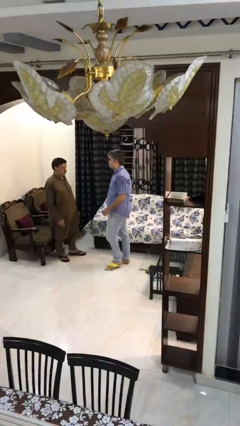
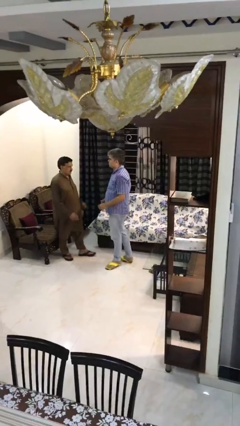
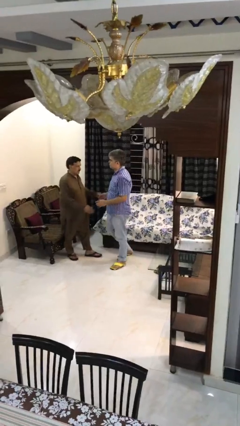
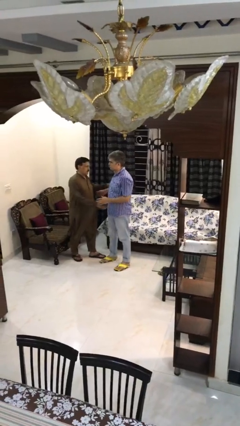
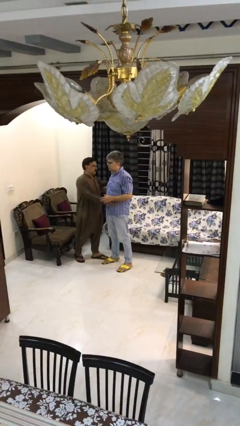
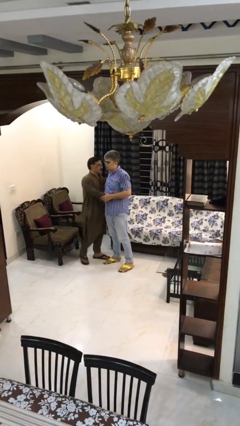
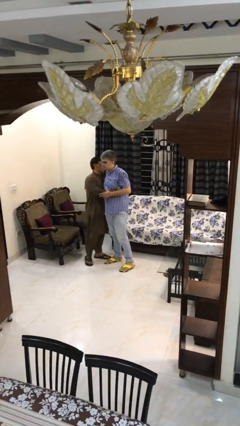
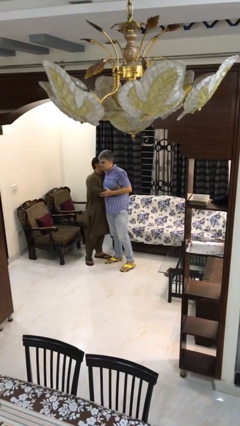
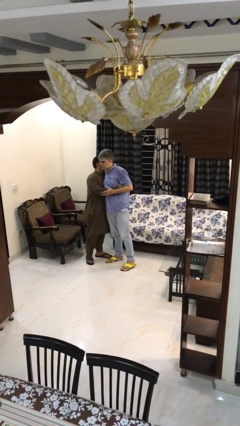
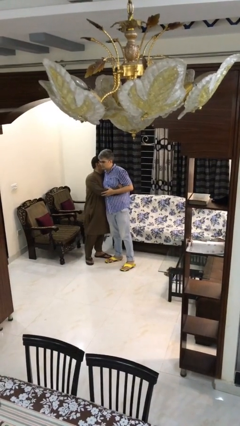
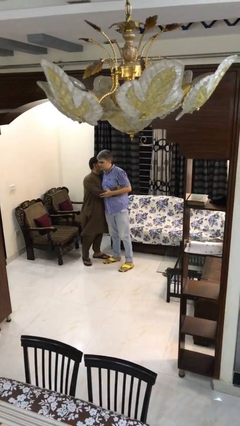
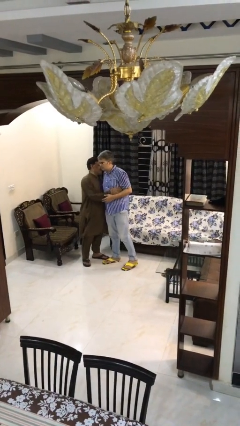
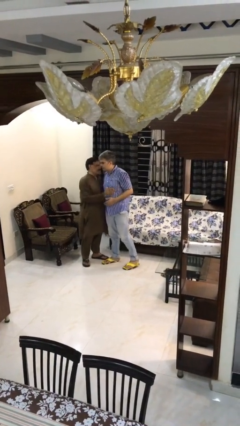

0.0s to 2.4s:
person embraces person

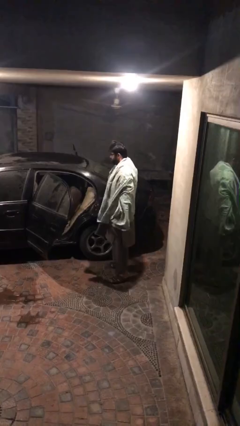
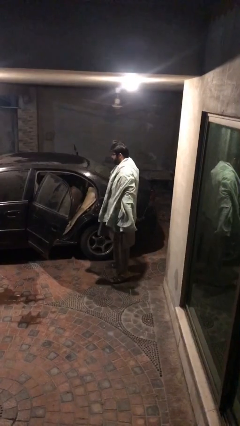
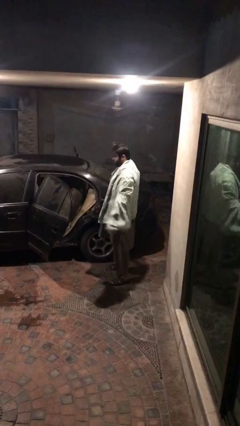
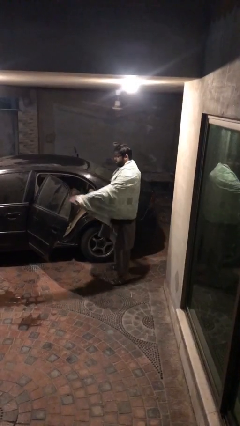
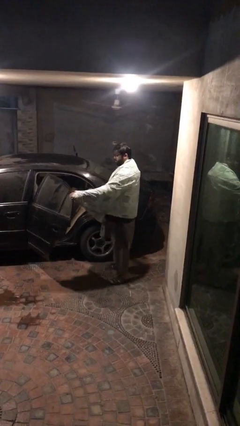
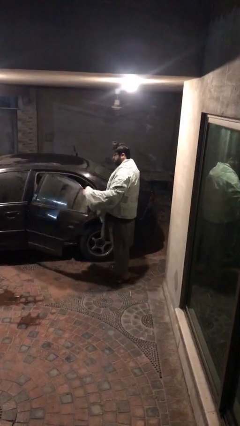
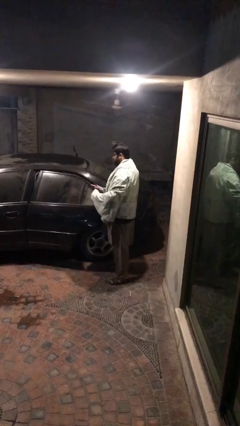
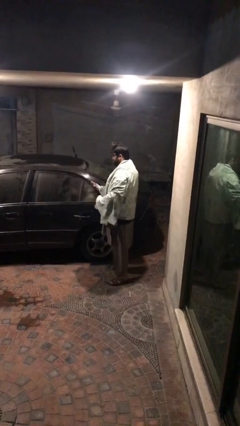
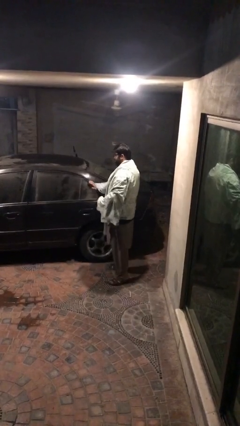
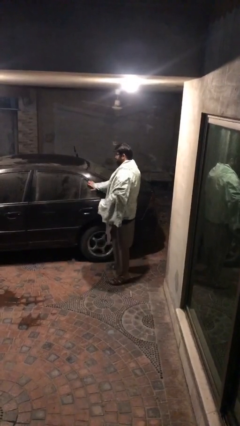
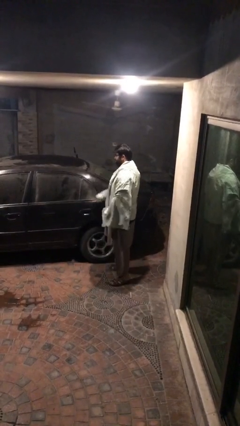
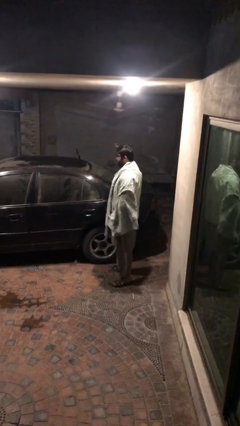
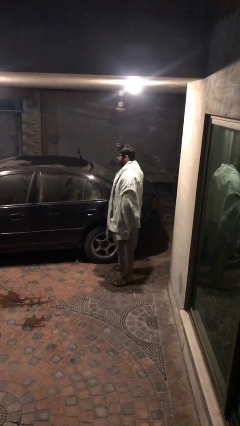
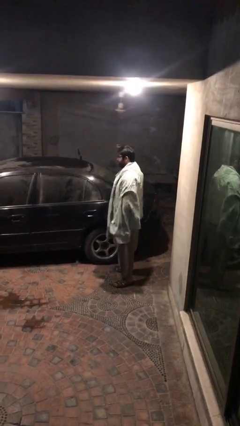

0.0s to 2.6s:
person closes car door

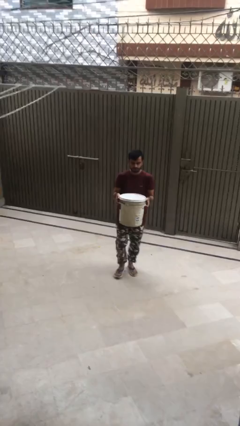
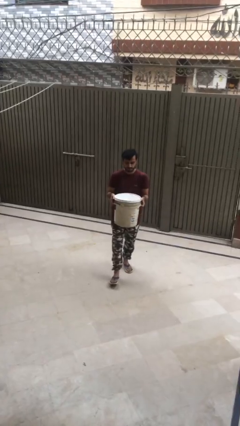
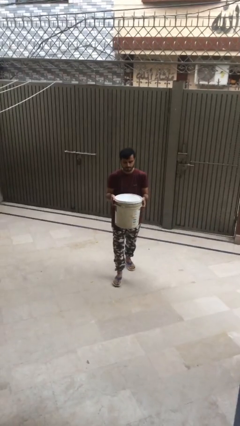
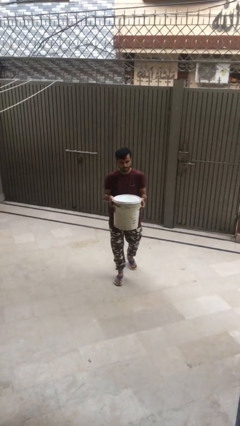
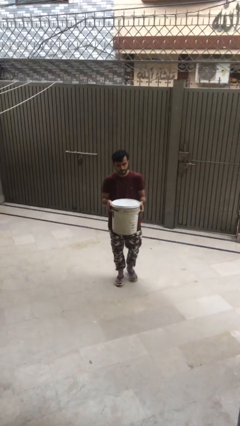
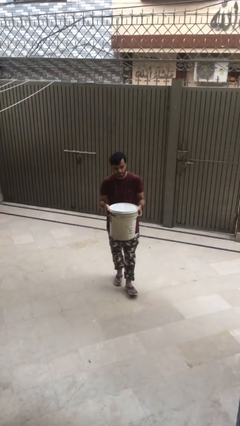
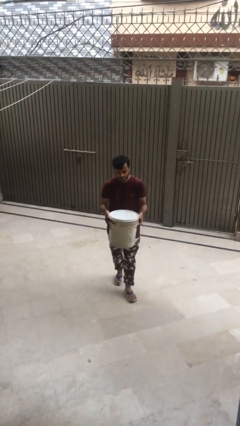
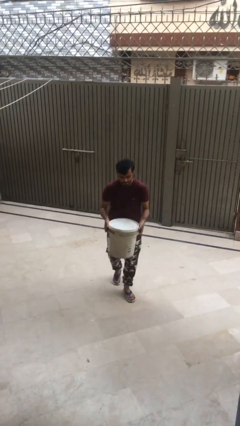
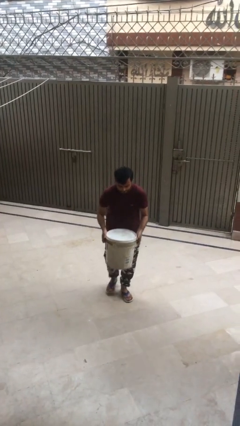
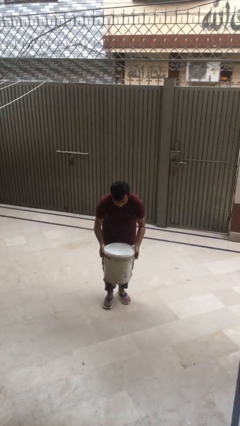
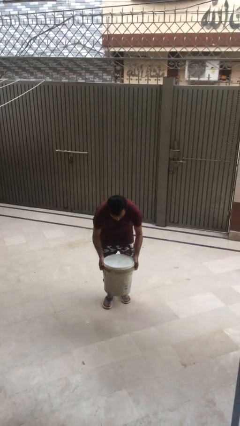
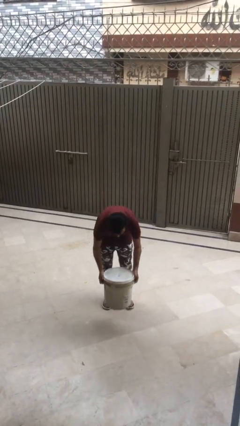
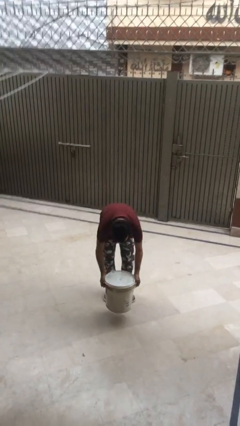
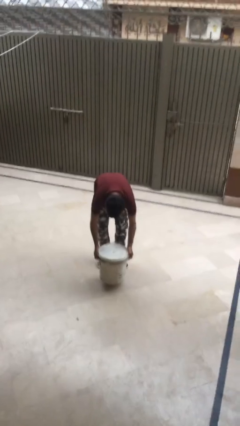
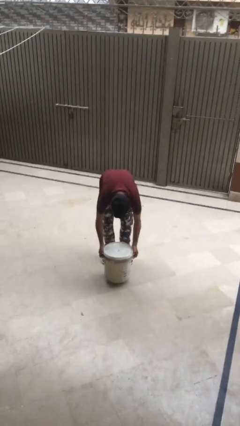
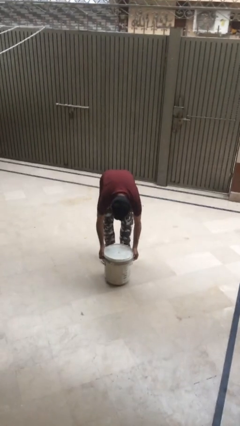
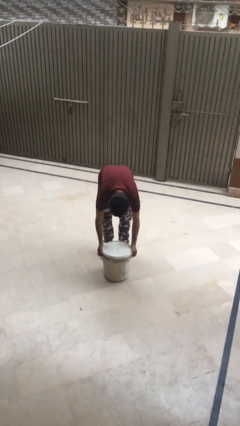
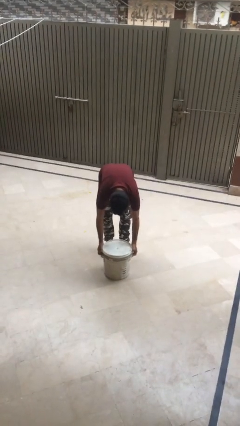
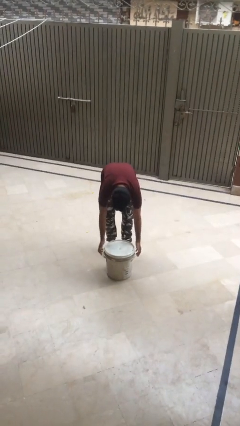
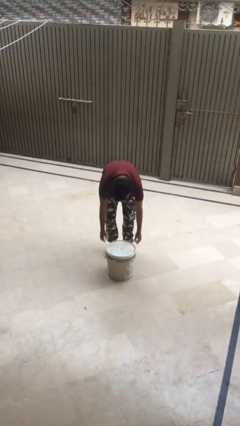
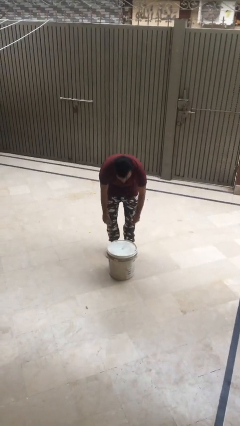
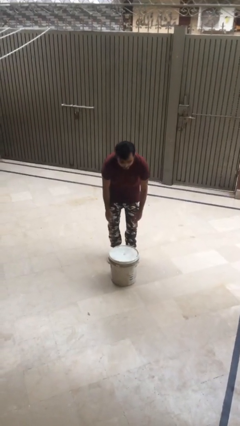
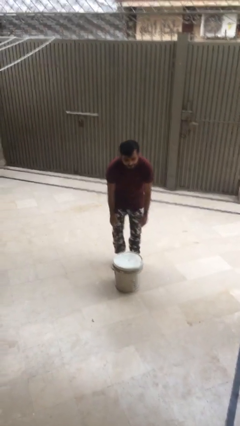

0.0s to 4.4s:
person puts down object on floor

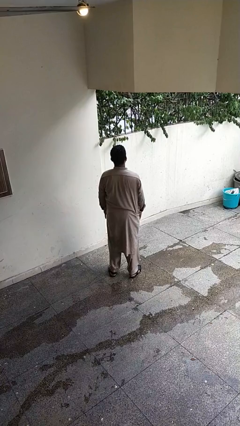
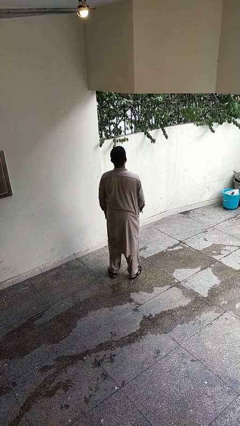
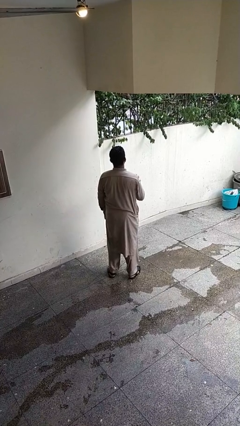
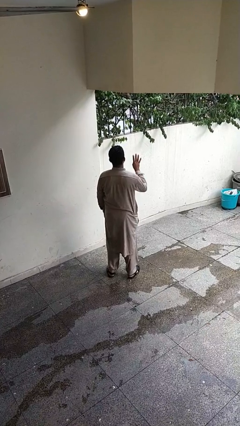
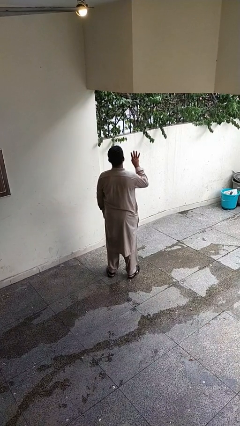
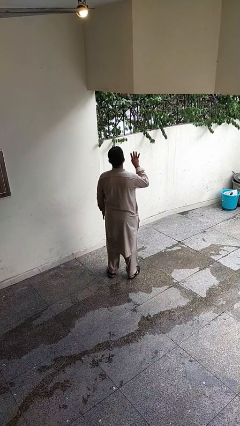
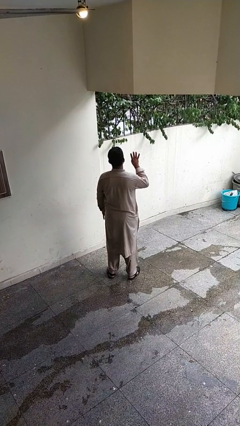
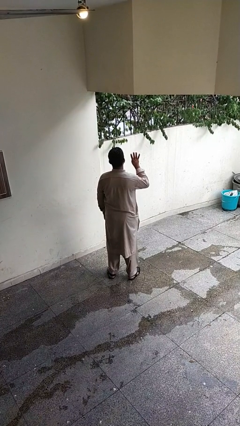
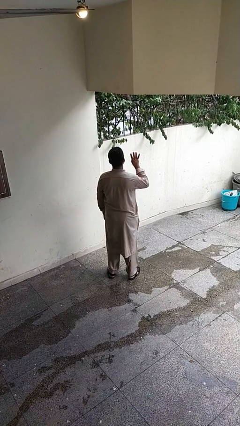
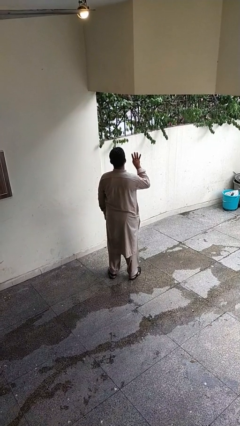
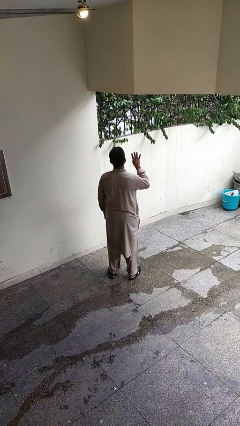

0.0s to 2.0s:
person gestures number four

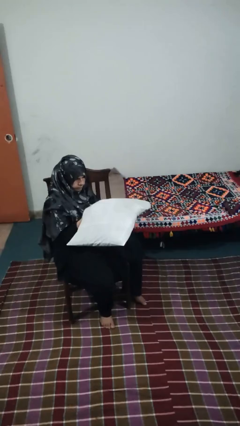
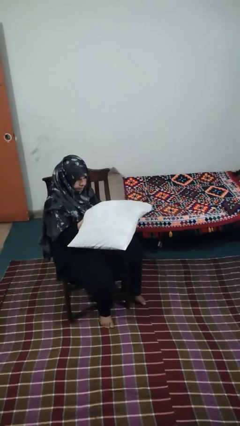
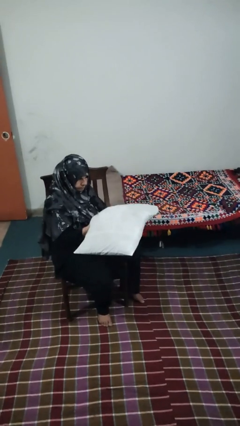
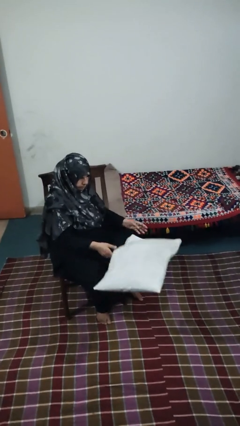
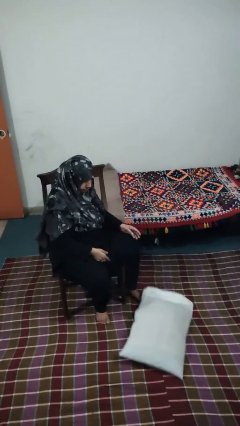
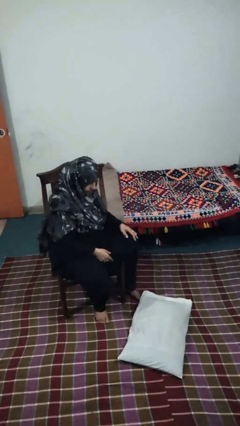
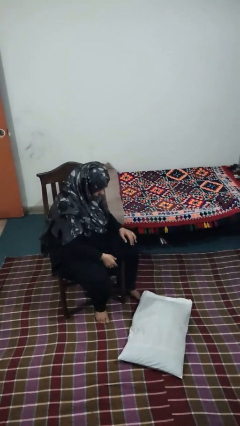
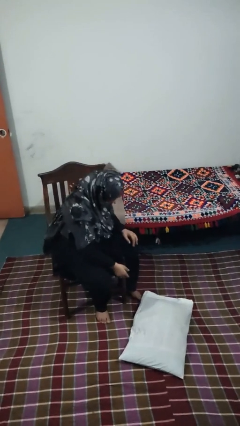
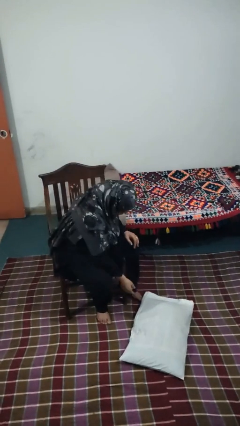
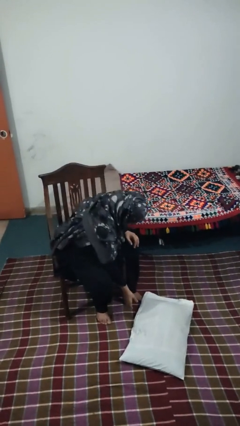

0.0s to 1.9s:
person drops object

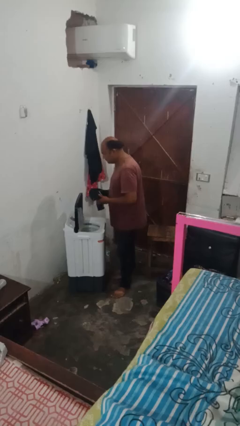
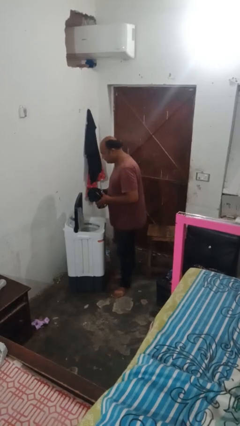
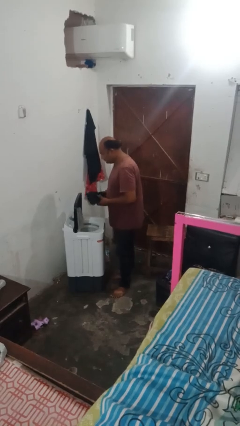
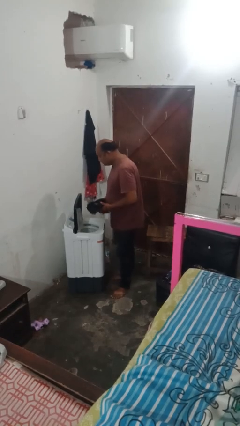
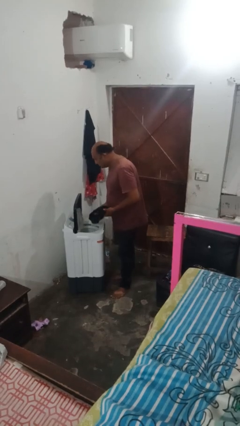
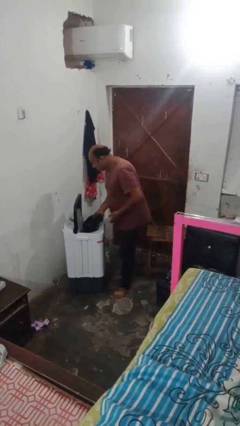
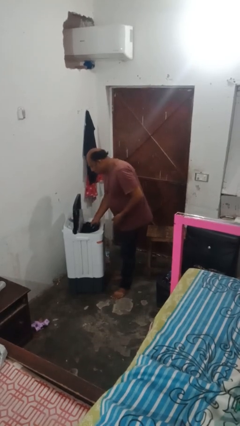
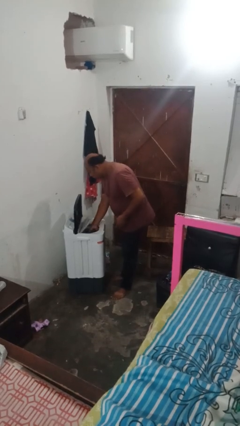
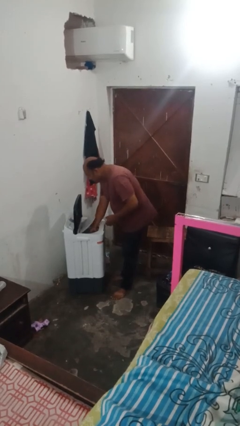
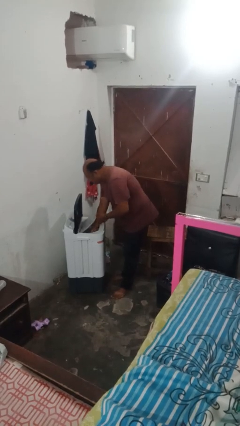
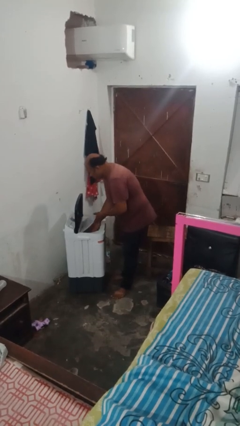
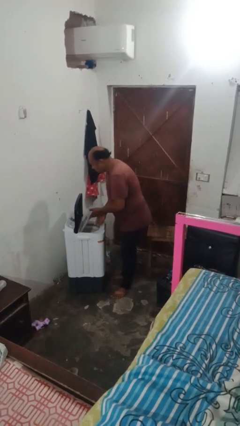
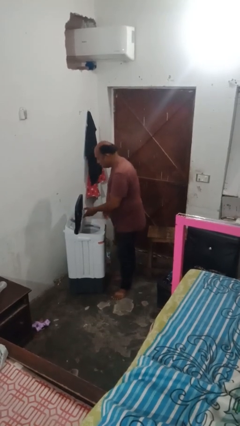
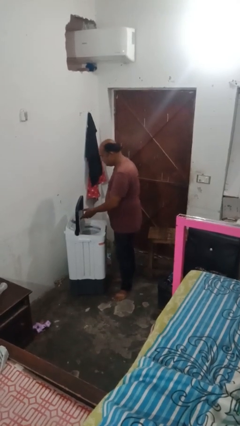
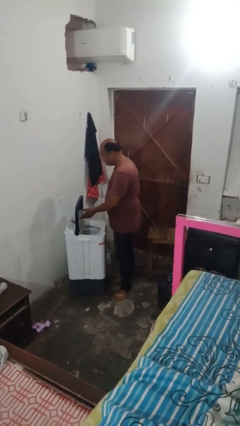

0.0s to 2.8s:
person loads clotheswasher

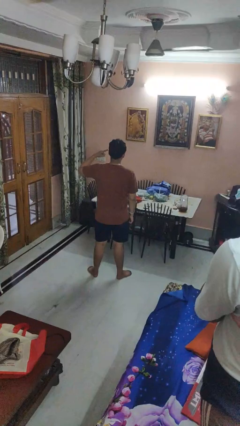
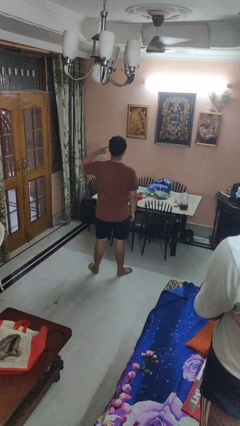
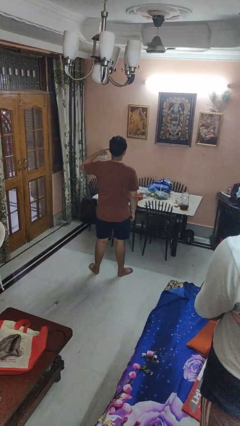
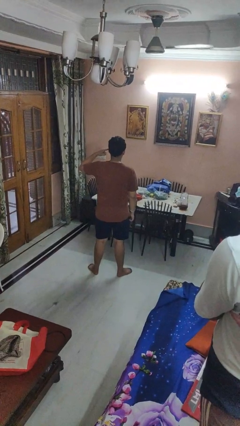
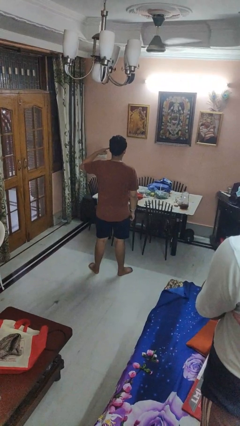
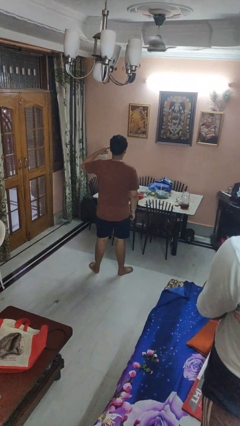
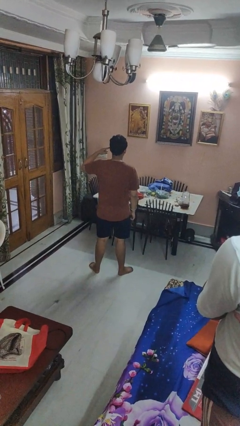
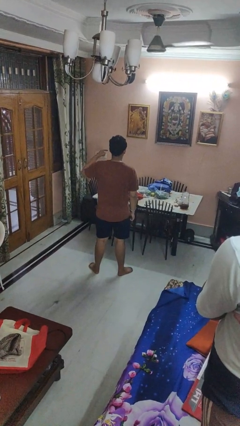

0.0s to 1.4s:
person gestures listen closely
